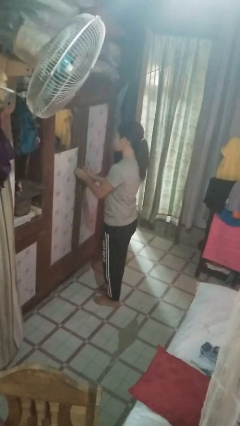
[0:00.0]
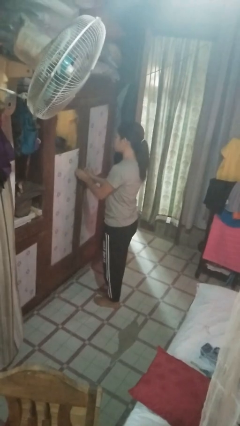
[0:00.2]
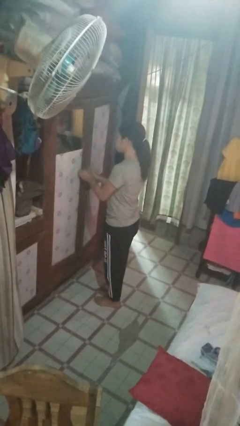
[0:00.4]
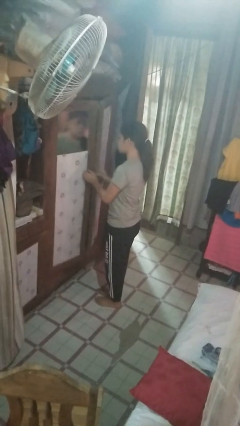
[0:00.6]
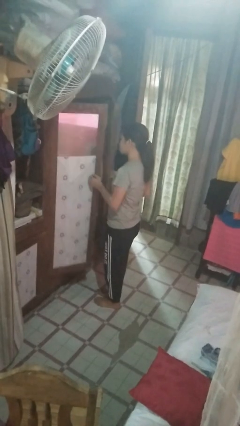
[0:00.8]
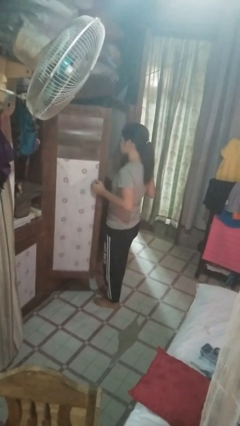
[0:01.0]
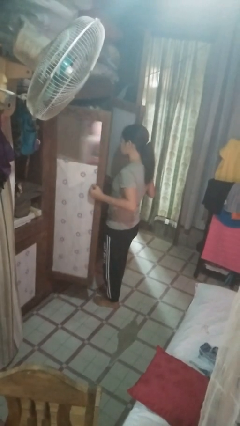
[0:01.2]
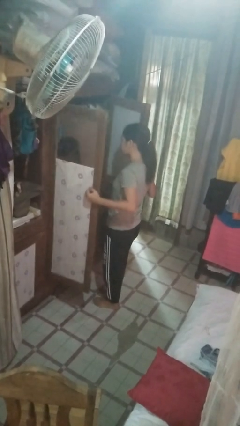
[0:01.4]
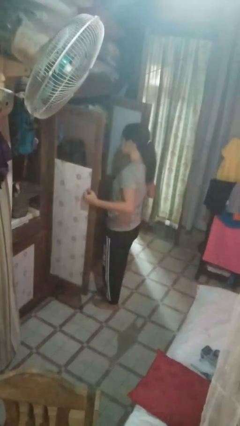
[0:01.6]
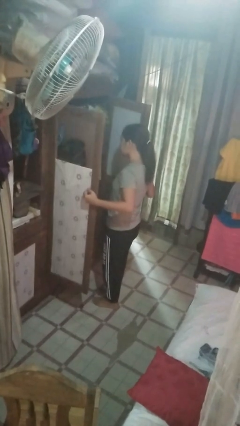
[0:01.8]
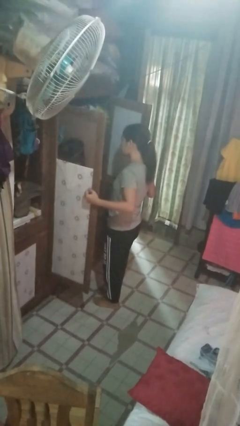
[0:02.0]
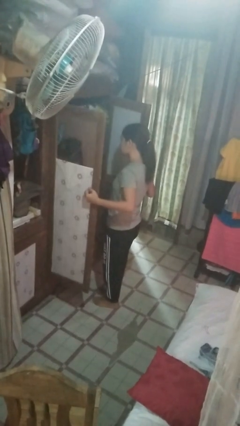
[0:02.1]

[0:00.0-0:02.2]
person opens closet door

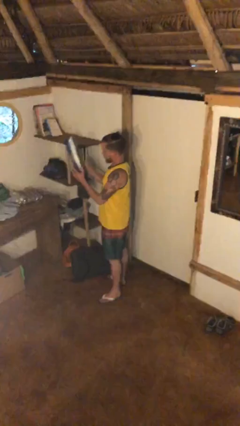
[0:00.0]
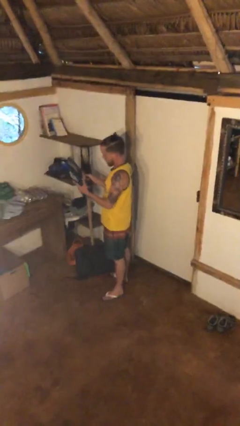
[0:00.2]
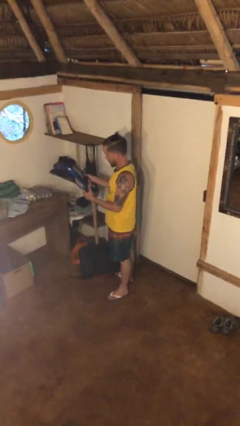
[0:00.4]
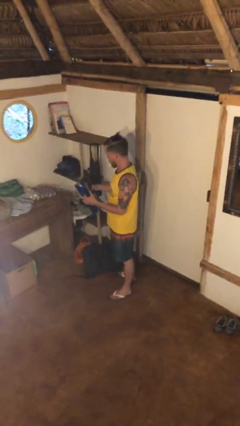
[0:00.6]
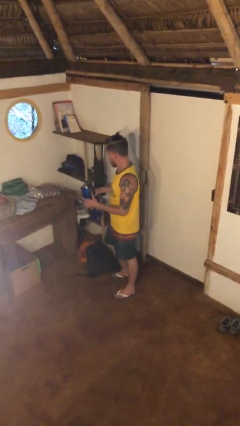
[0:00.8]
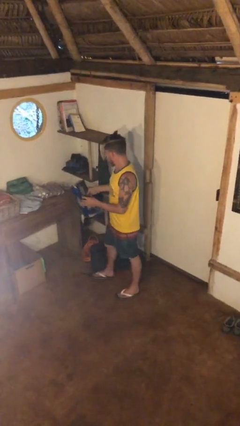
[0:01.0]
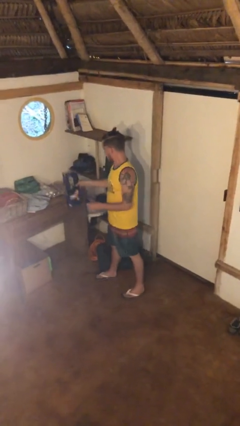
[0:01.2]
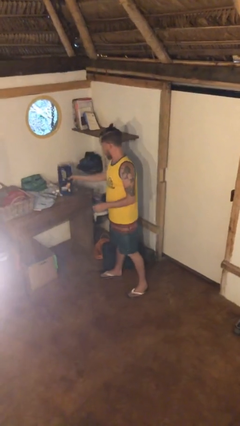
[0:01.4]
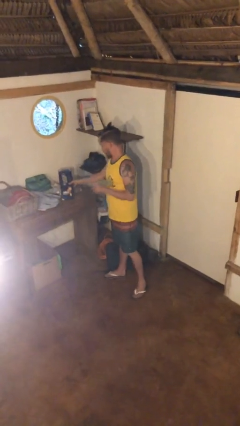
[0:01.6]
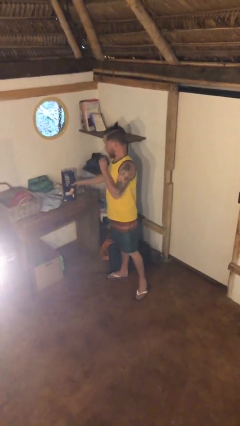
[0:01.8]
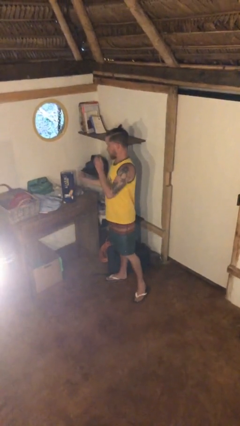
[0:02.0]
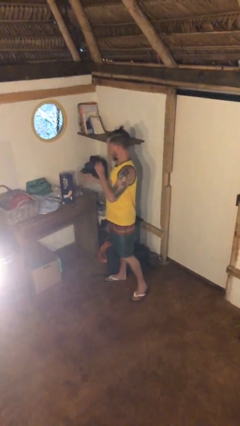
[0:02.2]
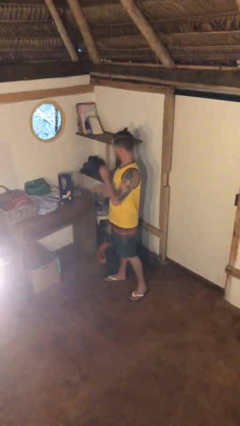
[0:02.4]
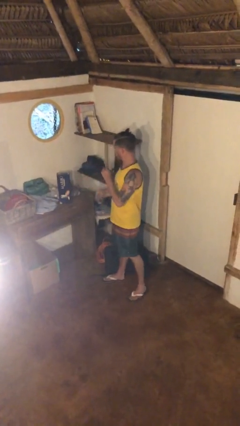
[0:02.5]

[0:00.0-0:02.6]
person puts down object on table

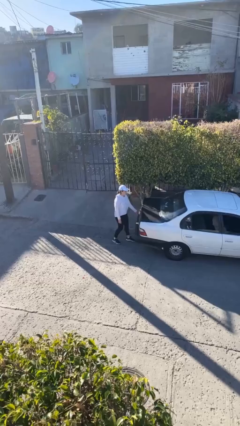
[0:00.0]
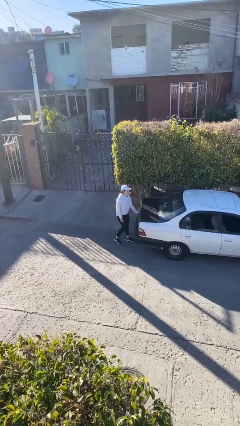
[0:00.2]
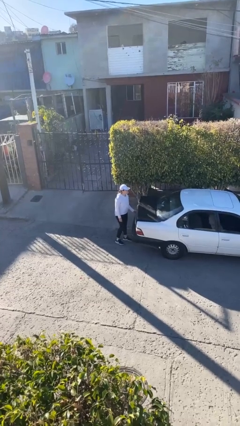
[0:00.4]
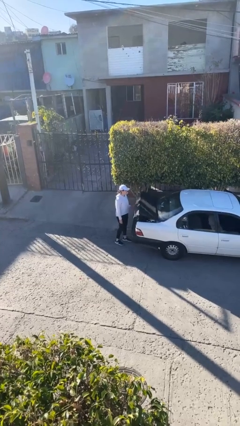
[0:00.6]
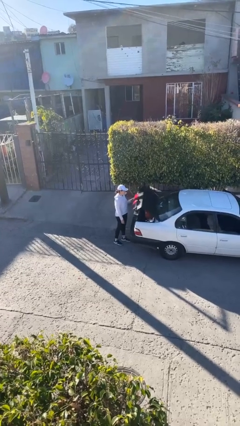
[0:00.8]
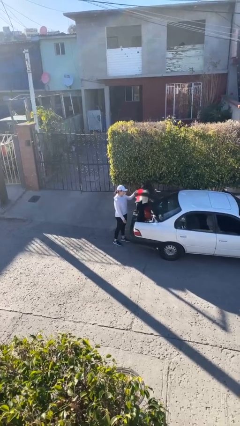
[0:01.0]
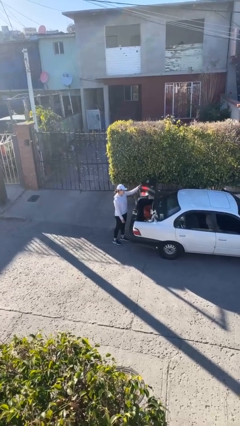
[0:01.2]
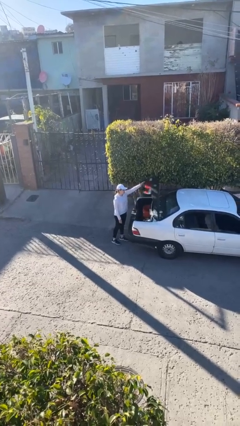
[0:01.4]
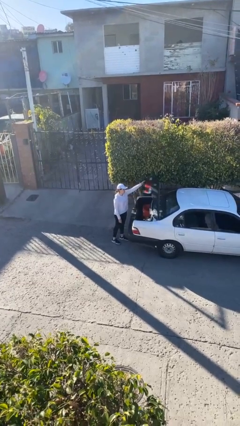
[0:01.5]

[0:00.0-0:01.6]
person opens car trunk

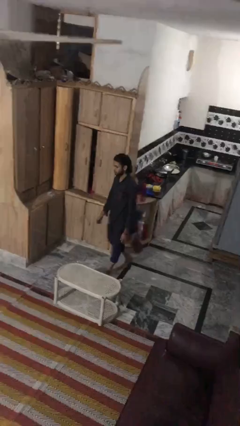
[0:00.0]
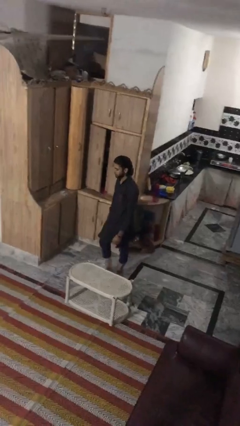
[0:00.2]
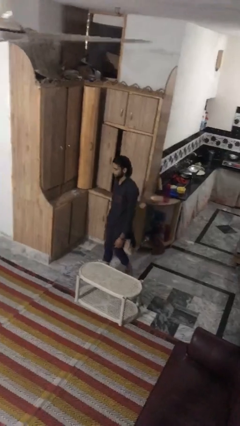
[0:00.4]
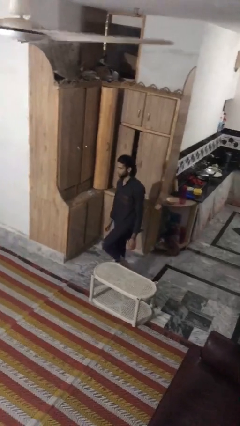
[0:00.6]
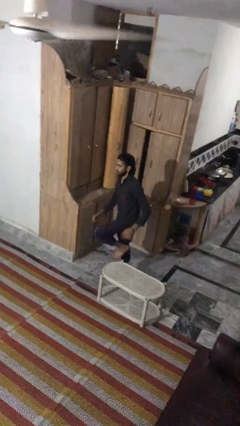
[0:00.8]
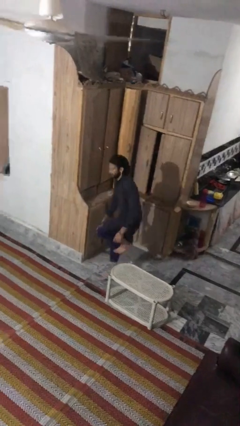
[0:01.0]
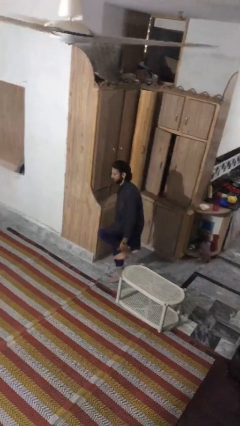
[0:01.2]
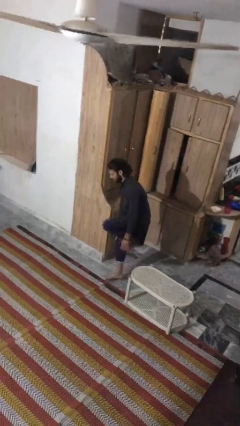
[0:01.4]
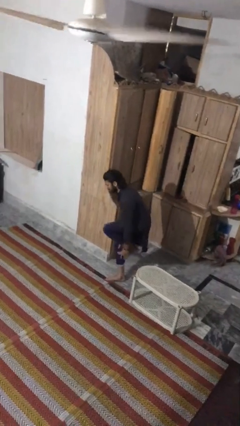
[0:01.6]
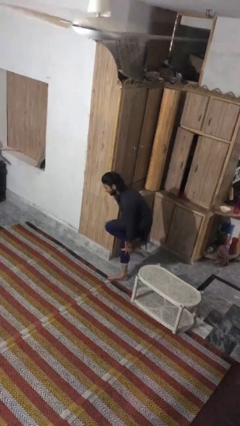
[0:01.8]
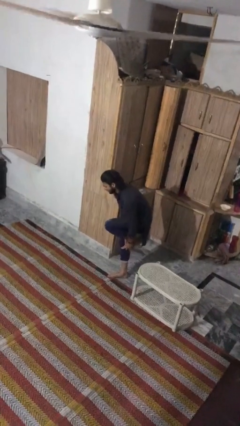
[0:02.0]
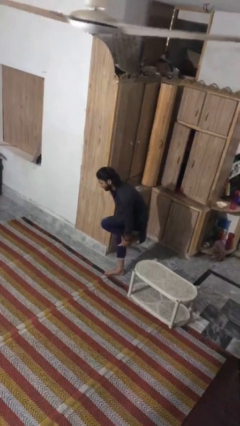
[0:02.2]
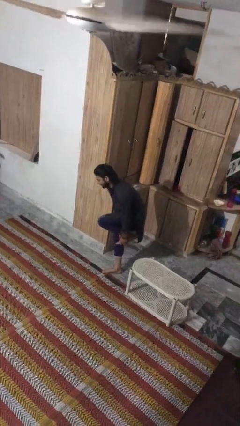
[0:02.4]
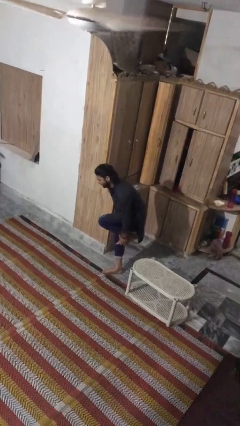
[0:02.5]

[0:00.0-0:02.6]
person bumps into table

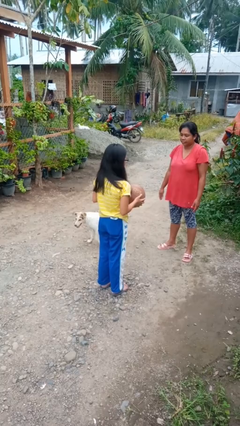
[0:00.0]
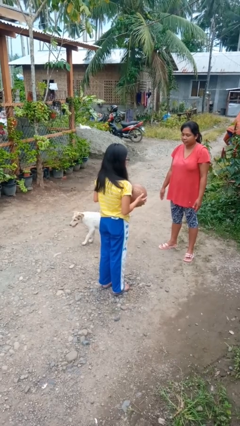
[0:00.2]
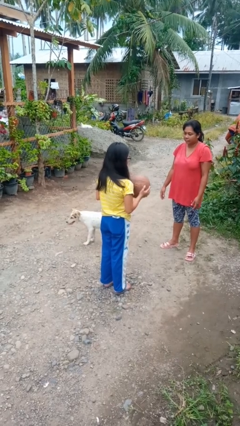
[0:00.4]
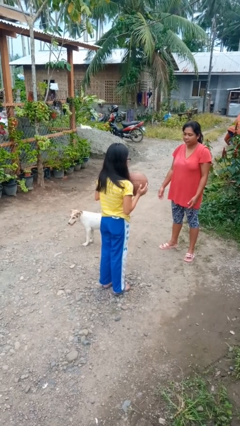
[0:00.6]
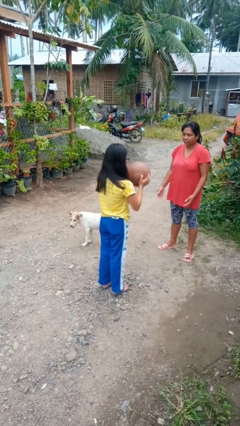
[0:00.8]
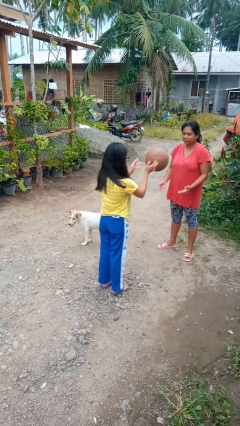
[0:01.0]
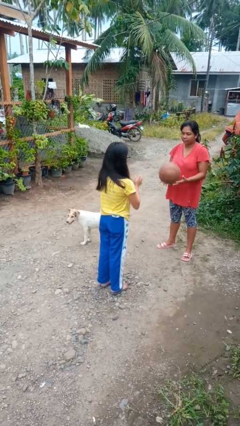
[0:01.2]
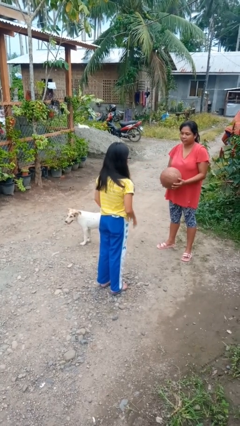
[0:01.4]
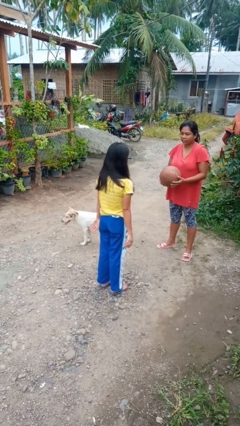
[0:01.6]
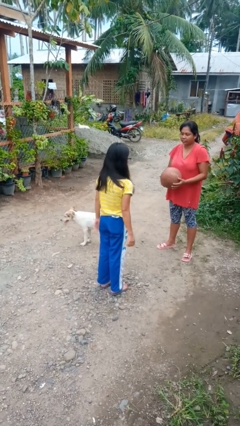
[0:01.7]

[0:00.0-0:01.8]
person throws object to person

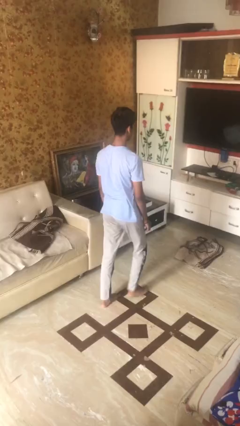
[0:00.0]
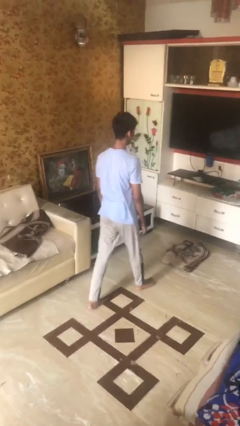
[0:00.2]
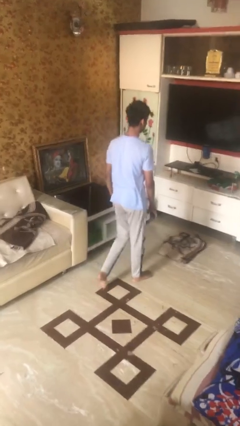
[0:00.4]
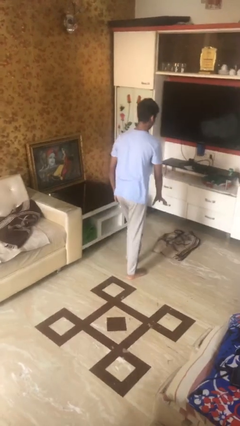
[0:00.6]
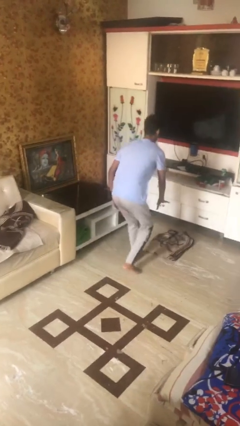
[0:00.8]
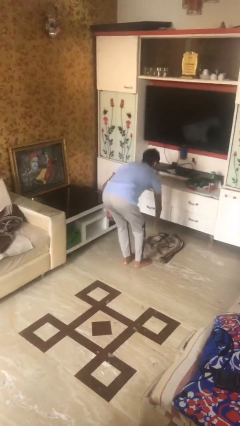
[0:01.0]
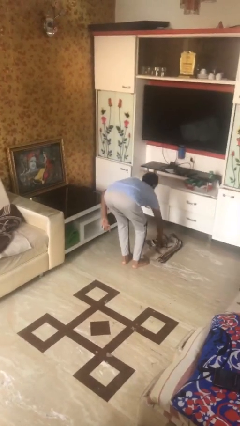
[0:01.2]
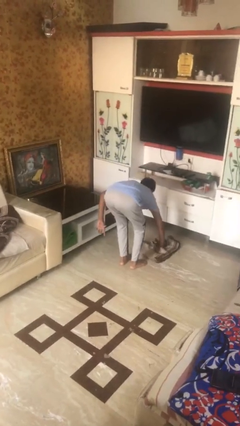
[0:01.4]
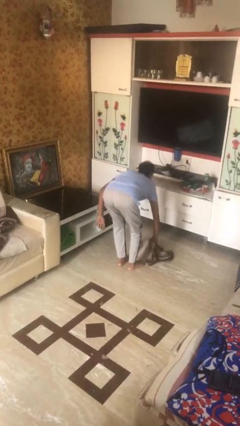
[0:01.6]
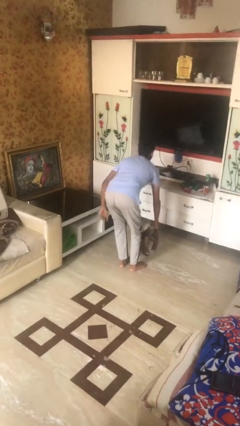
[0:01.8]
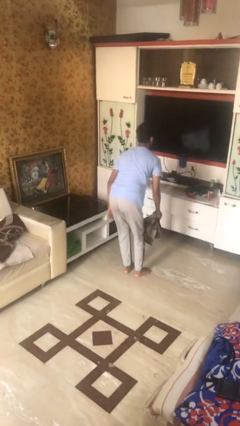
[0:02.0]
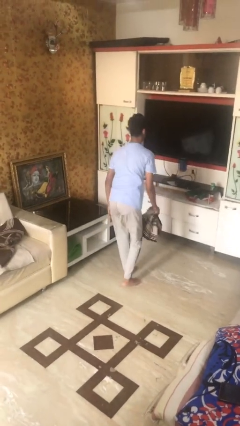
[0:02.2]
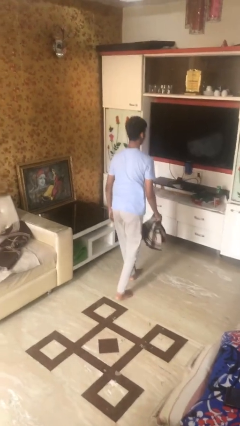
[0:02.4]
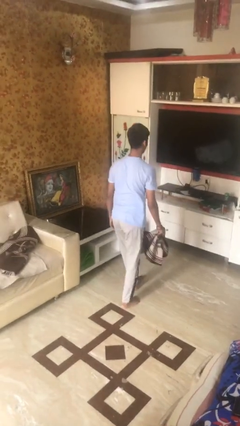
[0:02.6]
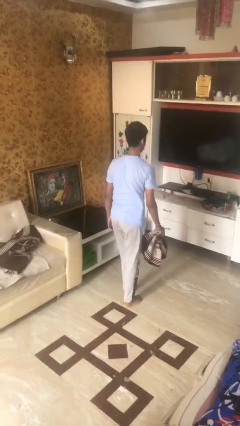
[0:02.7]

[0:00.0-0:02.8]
person picks up object from floor

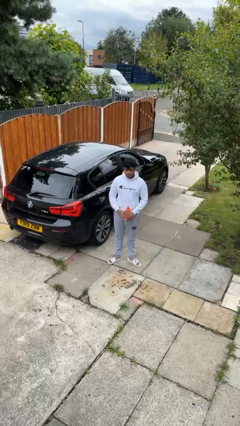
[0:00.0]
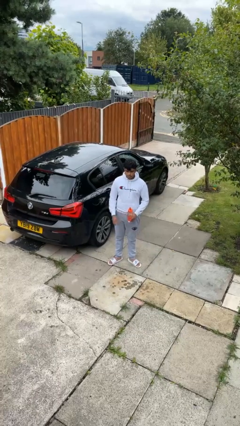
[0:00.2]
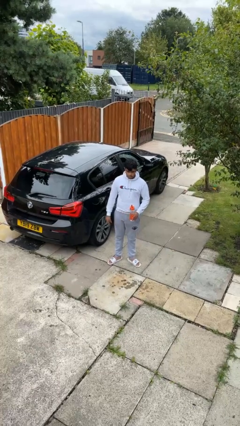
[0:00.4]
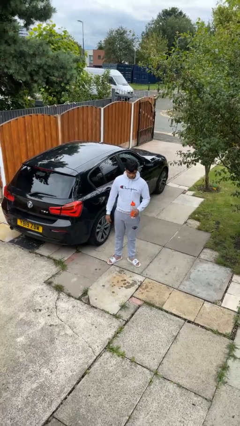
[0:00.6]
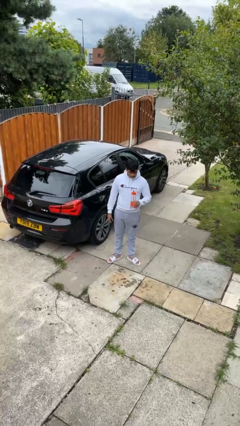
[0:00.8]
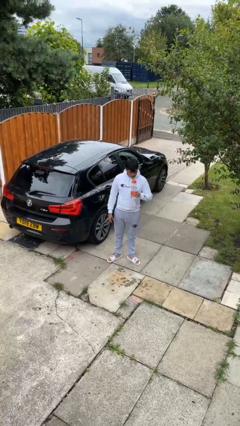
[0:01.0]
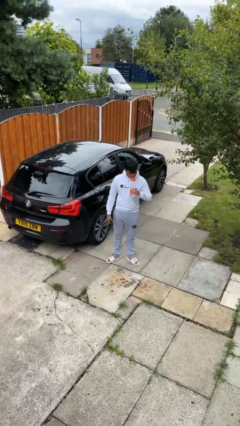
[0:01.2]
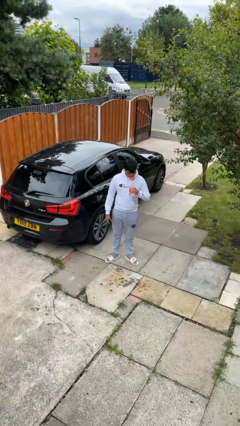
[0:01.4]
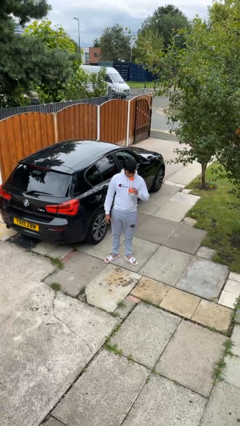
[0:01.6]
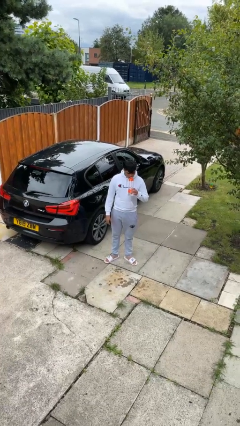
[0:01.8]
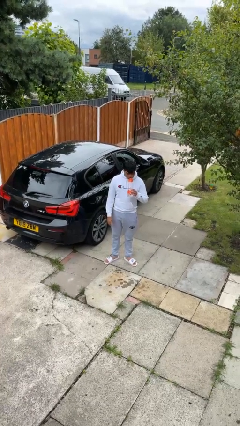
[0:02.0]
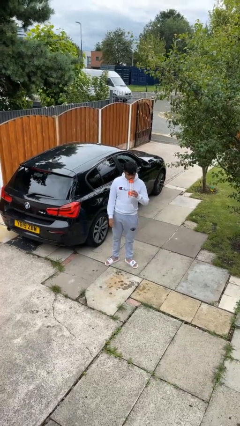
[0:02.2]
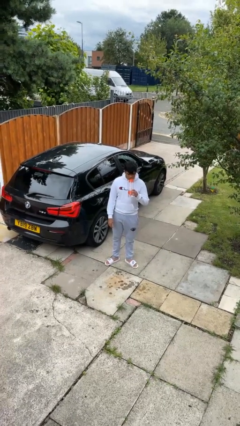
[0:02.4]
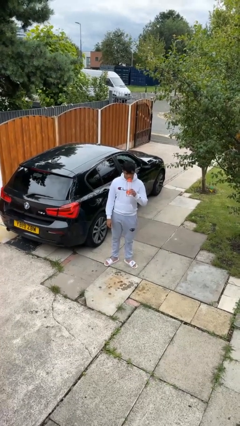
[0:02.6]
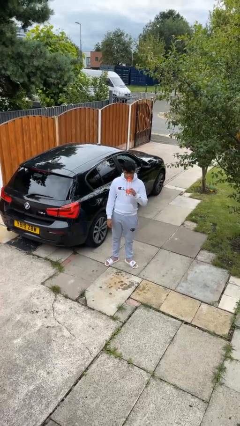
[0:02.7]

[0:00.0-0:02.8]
person drinks from bottle
